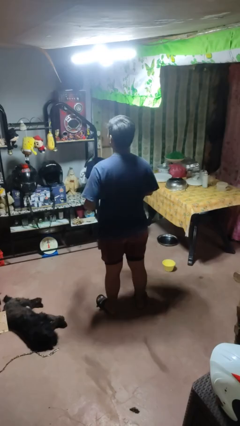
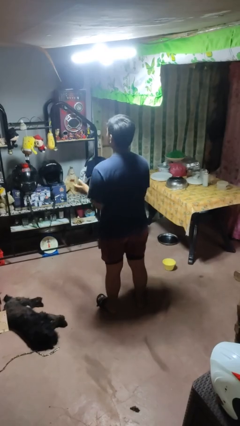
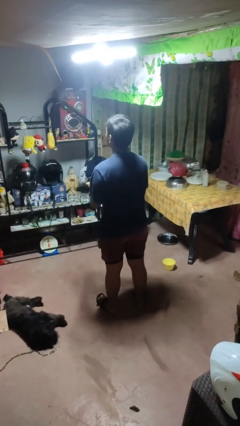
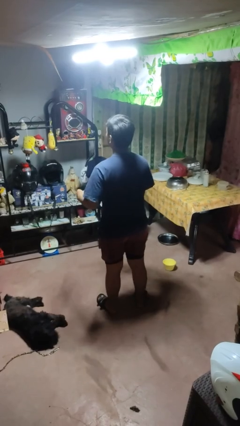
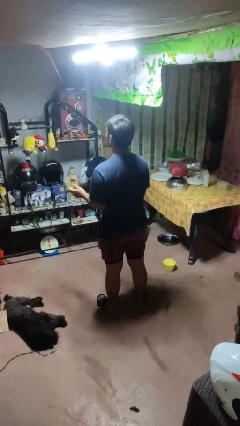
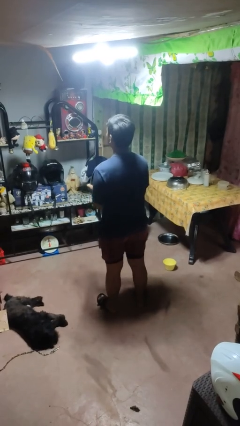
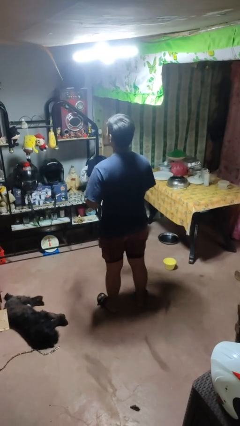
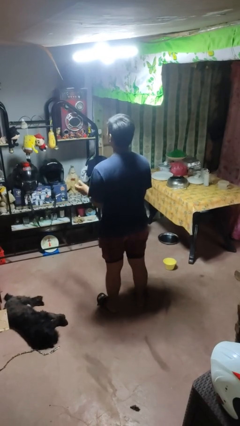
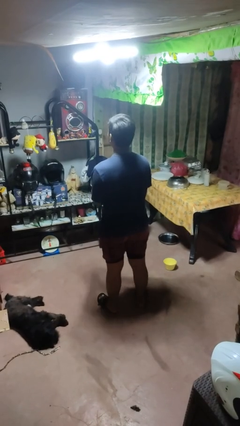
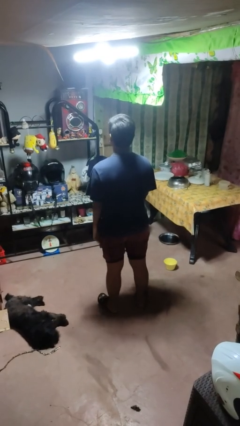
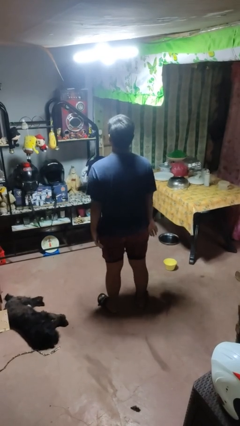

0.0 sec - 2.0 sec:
person claps hands

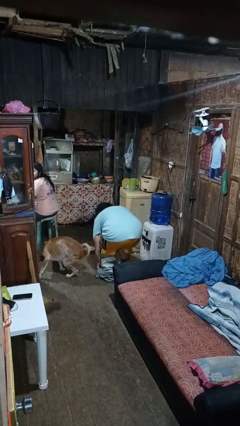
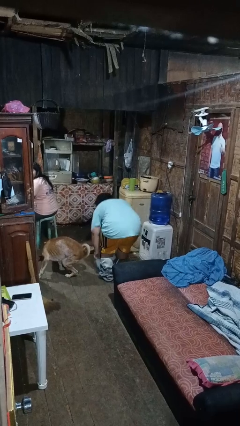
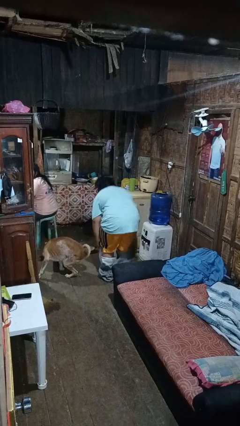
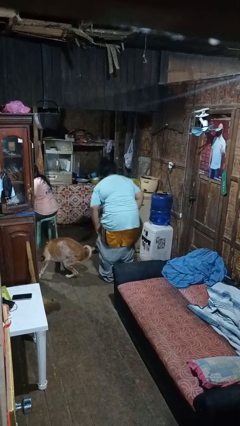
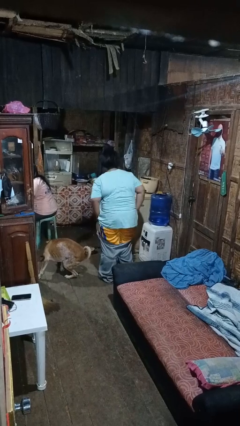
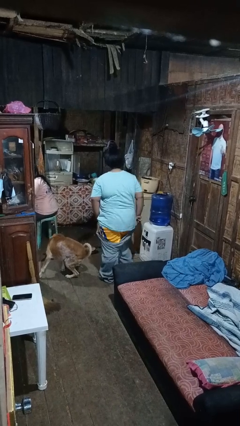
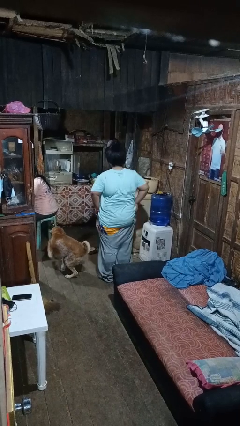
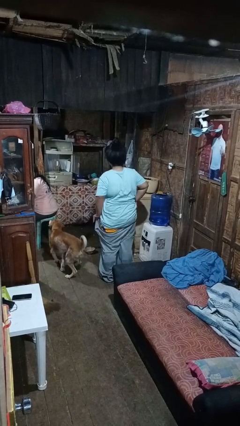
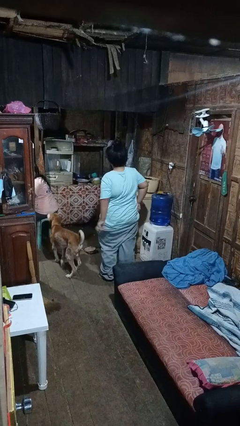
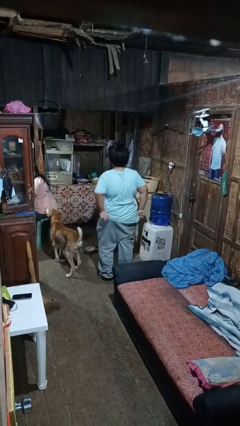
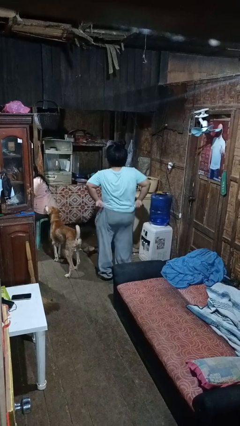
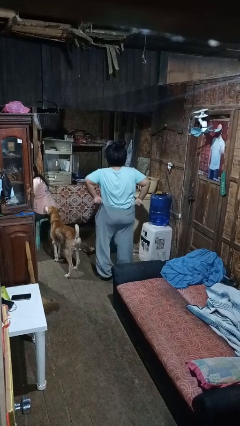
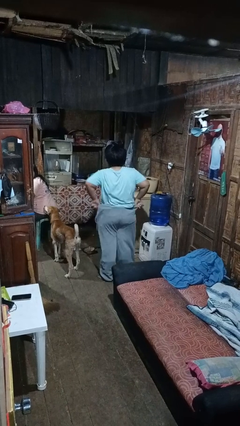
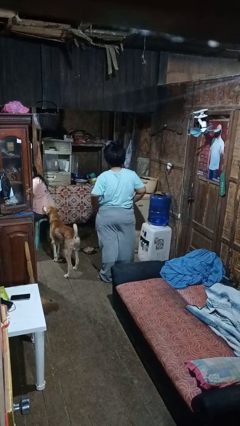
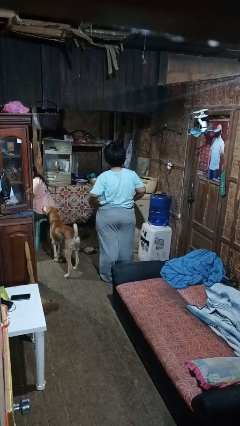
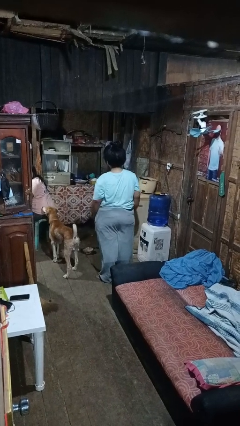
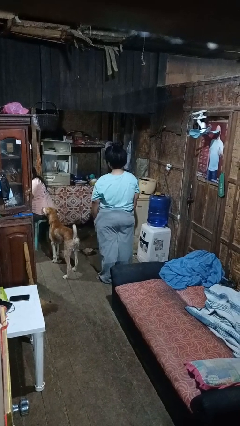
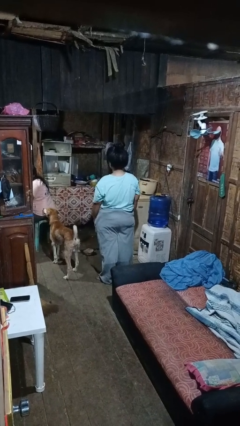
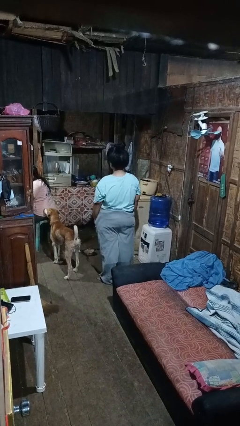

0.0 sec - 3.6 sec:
person puts on pants

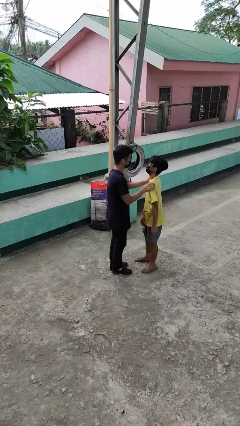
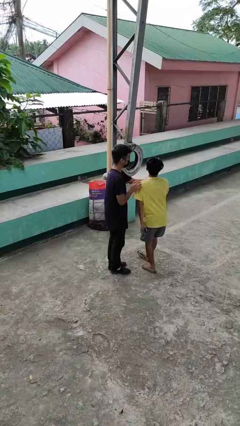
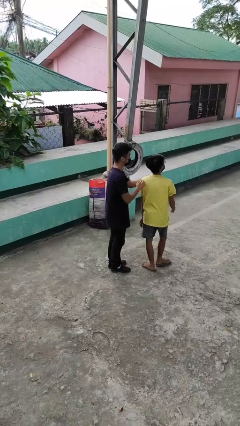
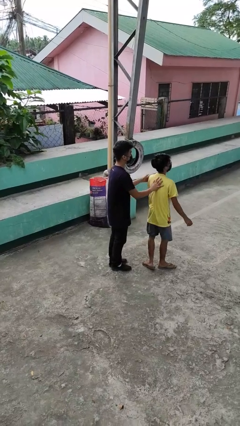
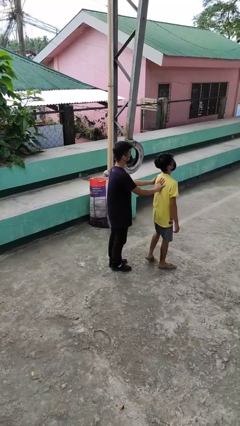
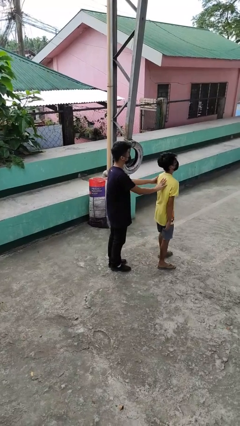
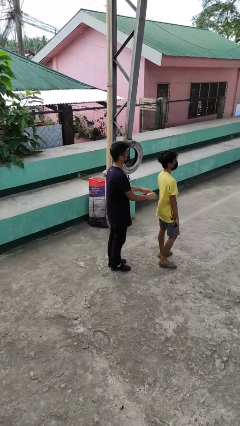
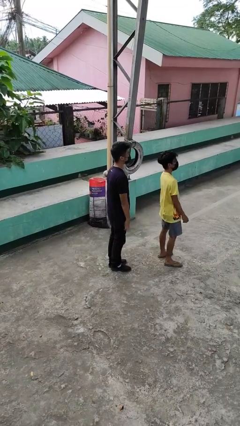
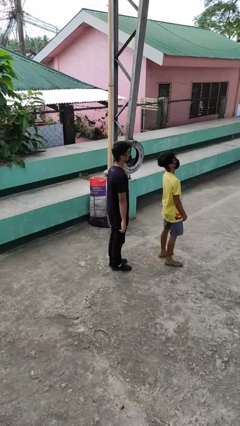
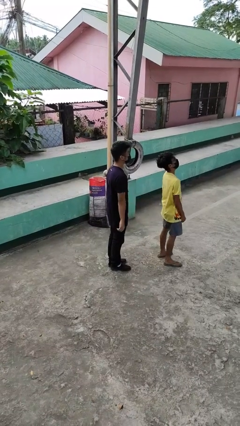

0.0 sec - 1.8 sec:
person spins person around

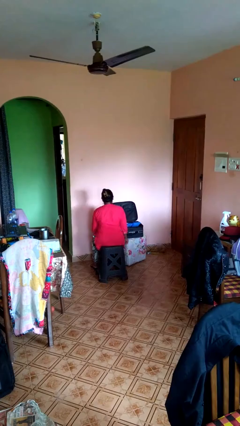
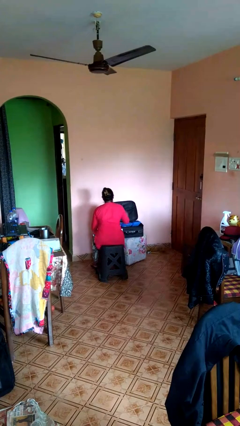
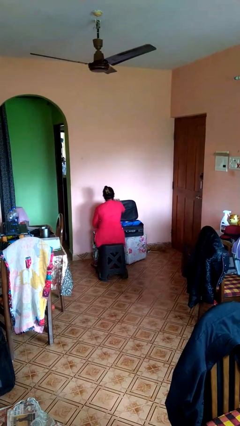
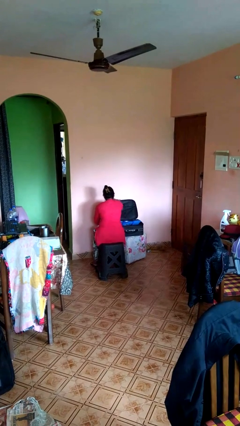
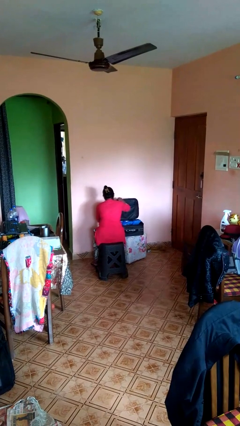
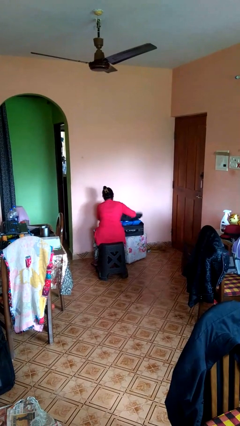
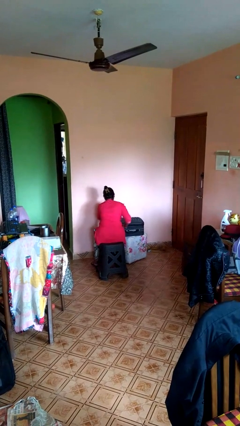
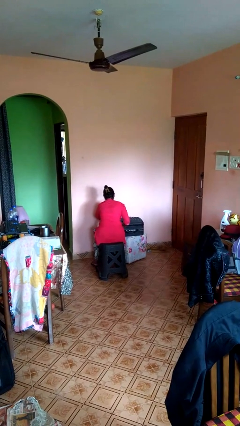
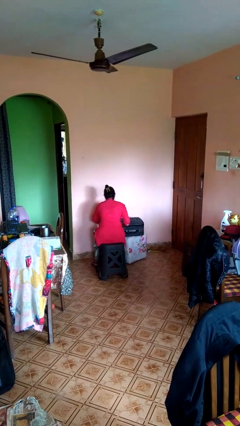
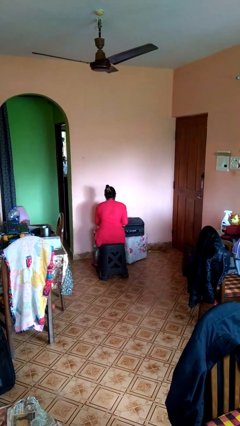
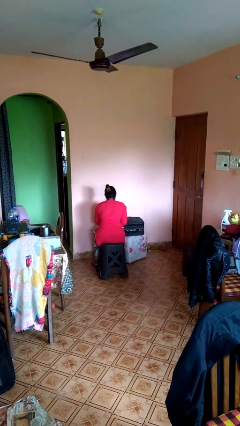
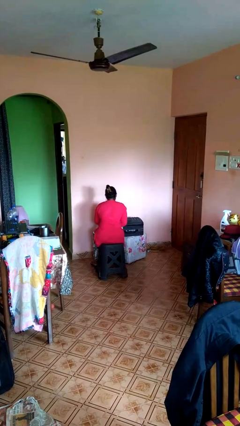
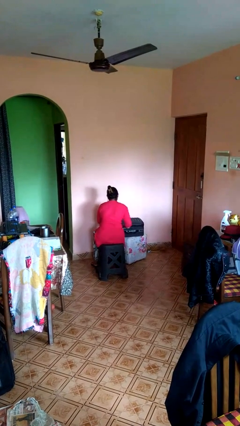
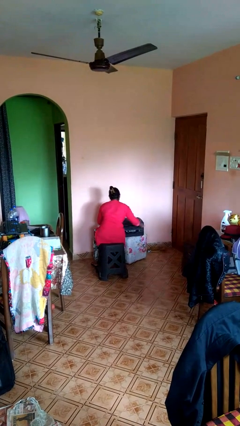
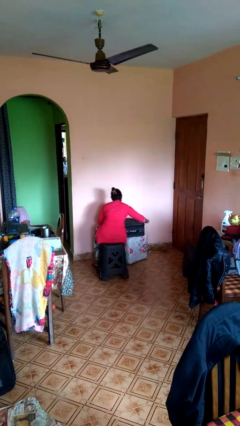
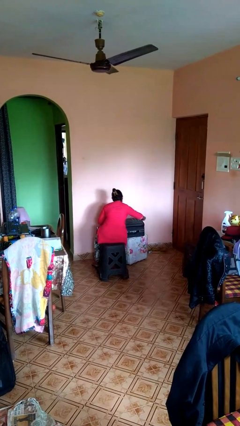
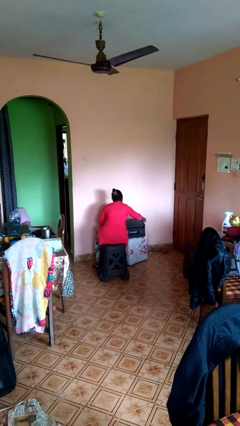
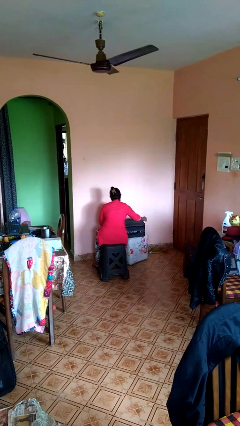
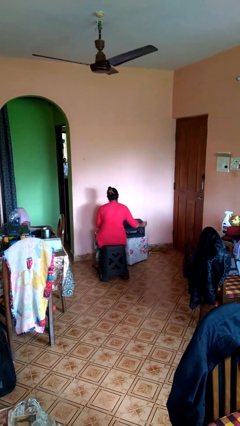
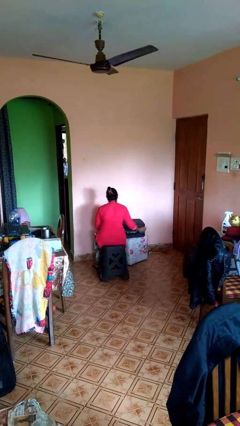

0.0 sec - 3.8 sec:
person closes suitcase

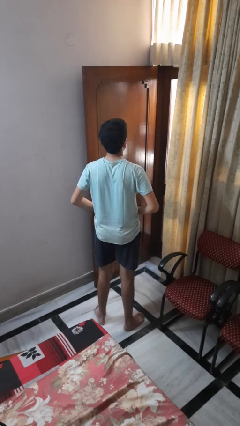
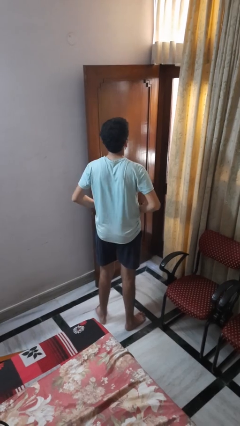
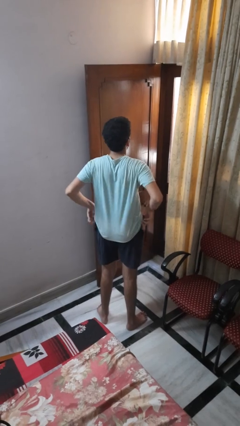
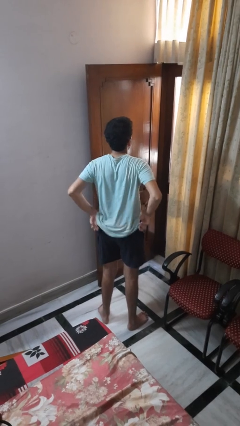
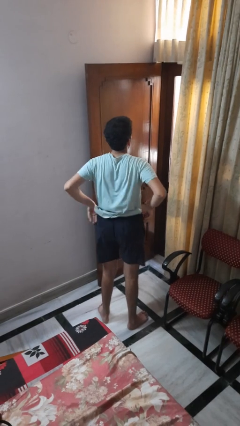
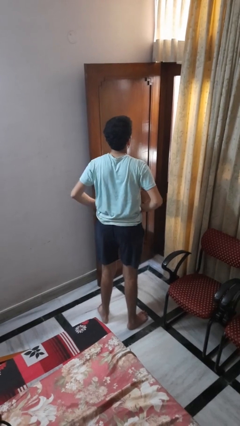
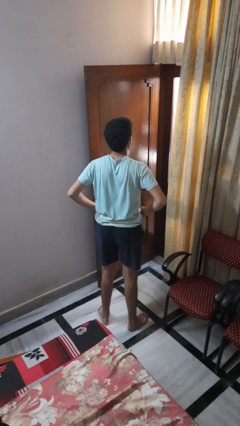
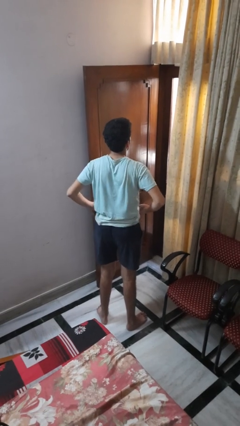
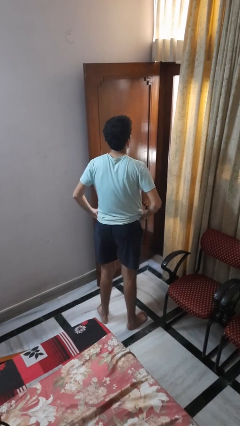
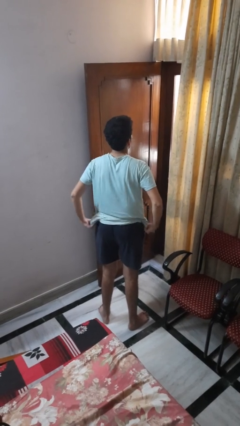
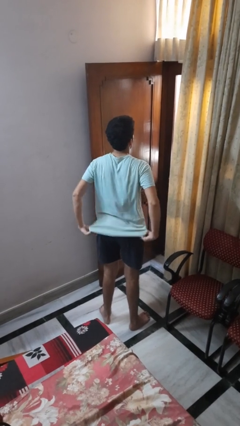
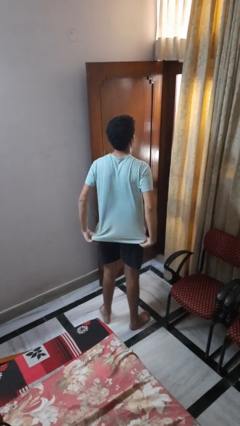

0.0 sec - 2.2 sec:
person hikes up pants

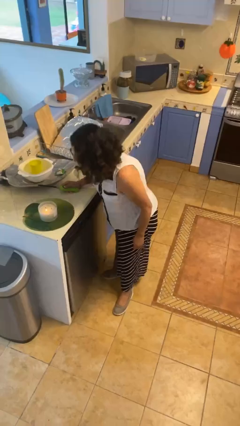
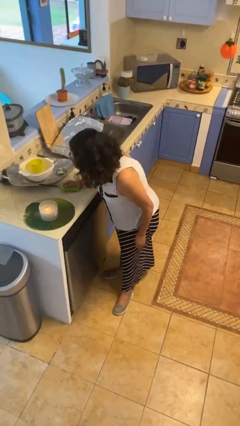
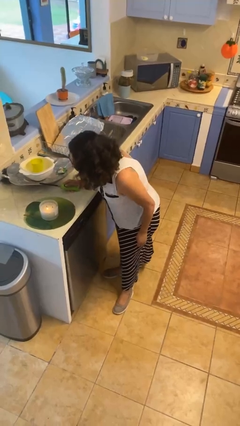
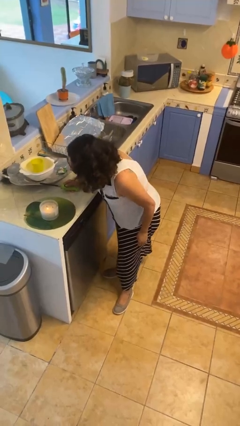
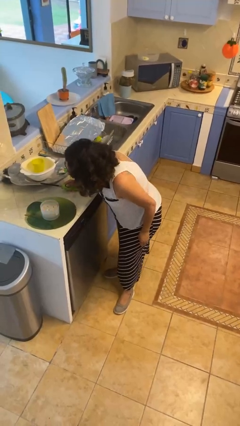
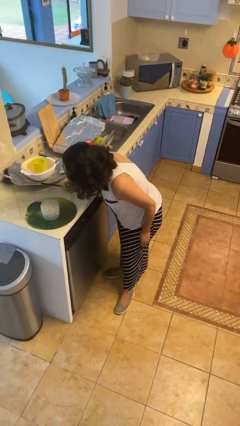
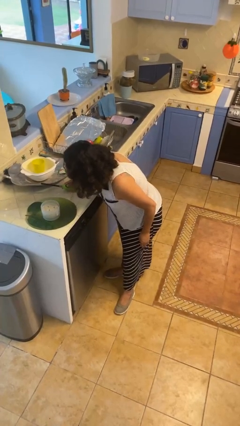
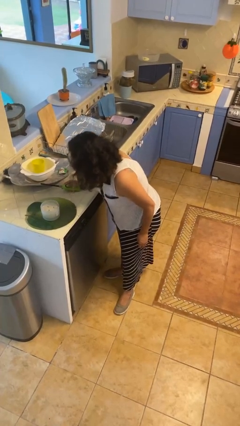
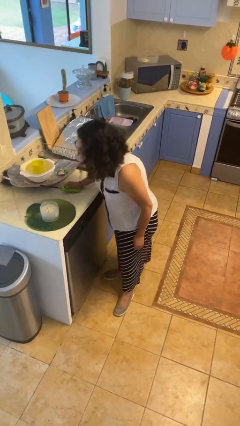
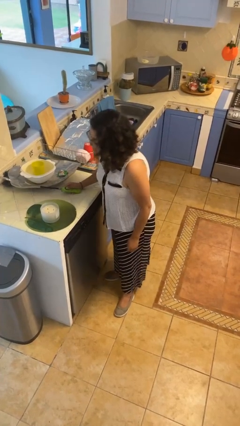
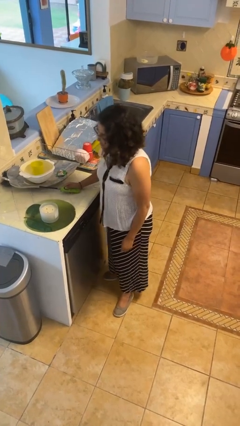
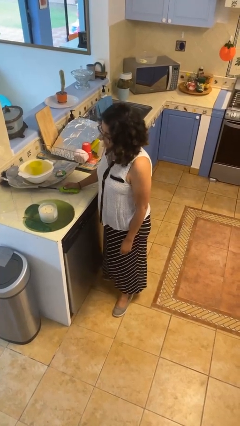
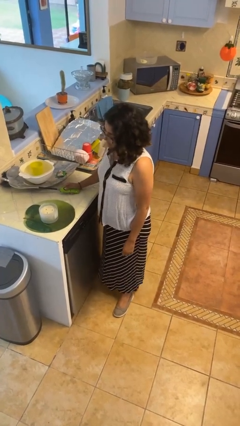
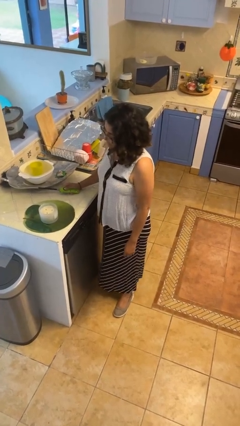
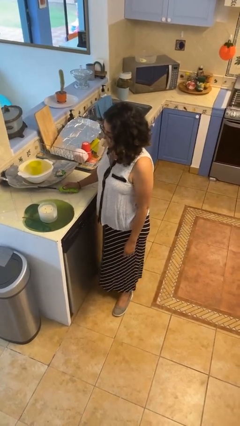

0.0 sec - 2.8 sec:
person extinguishes candle

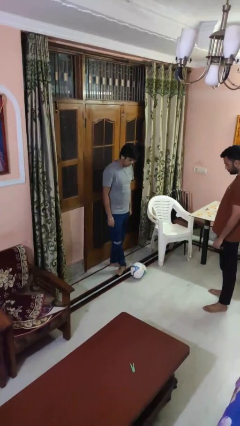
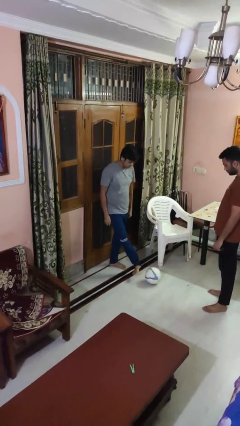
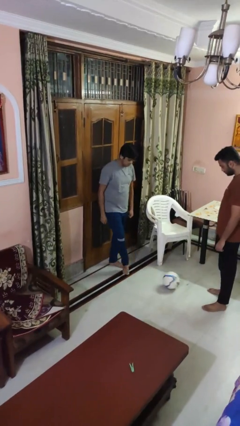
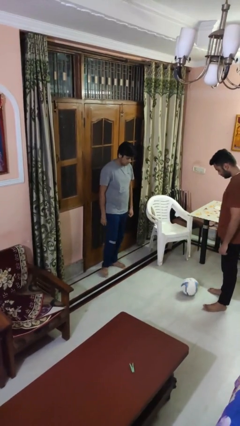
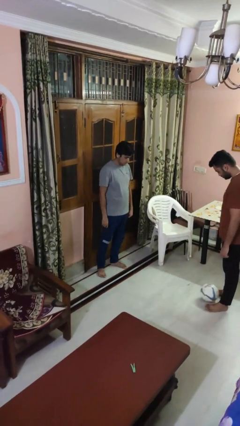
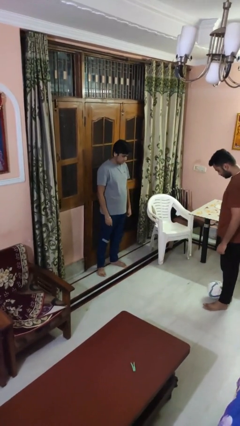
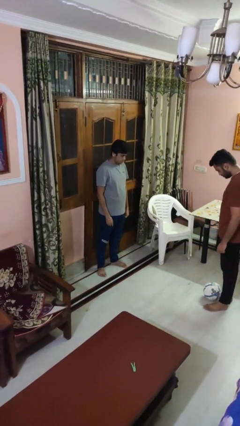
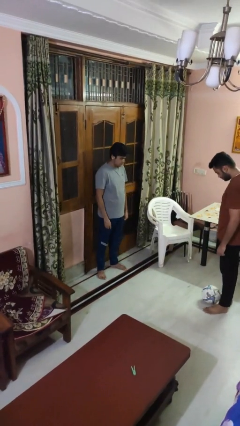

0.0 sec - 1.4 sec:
person kicks object to person
